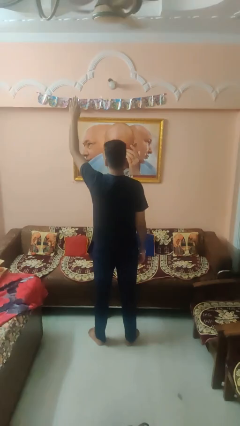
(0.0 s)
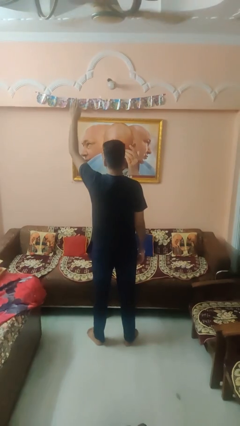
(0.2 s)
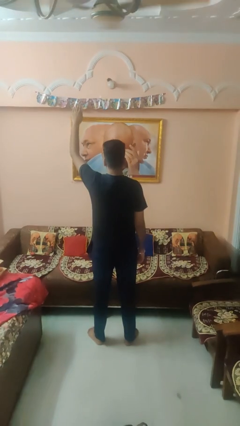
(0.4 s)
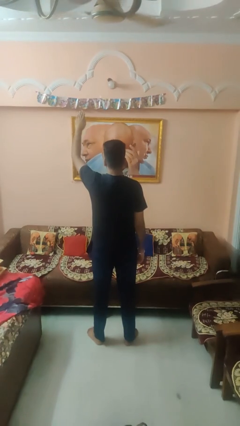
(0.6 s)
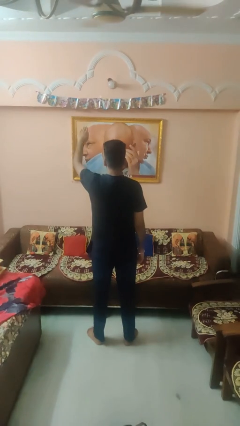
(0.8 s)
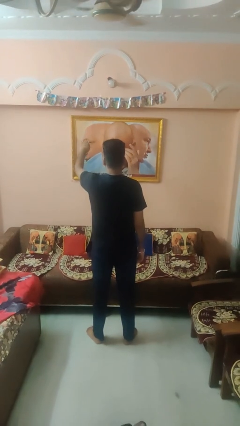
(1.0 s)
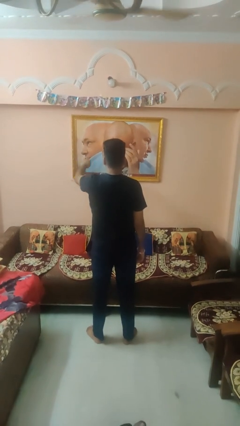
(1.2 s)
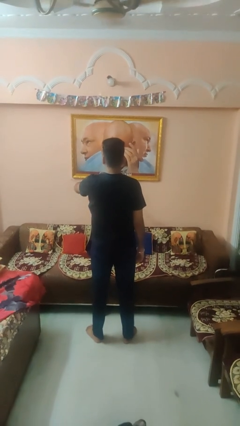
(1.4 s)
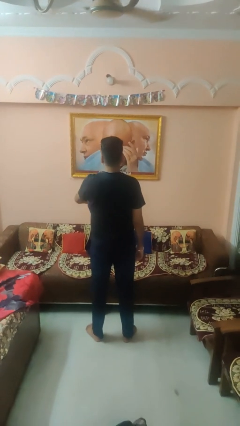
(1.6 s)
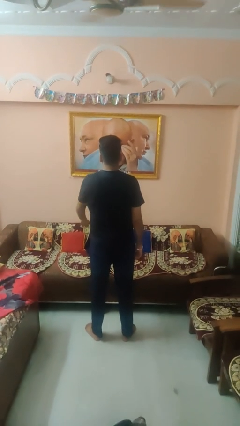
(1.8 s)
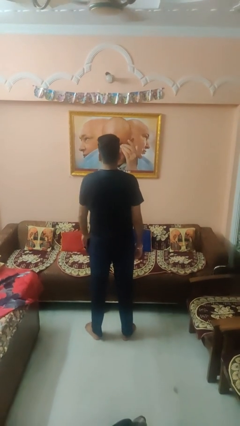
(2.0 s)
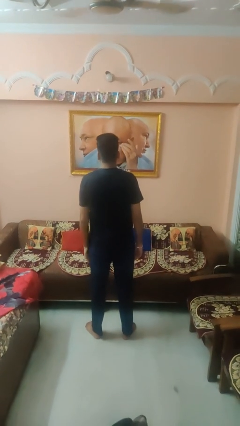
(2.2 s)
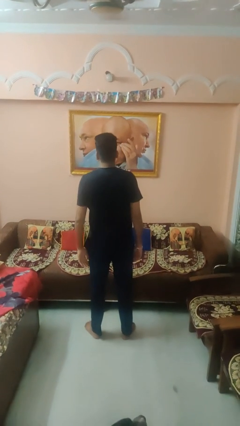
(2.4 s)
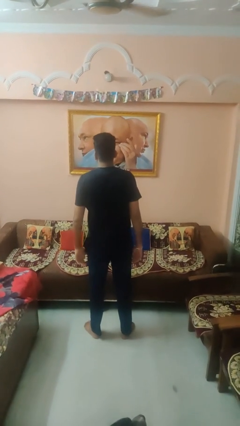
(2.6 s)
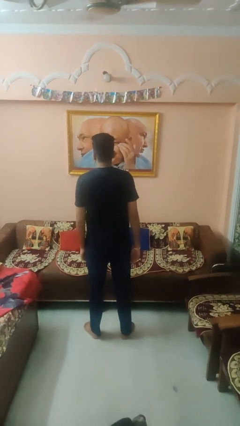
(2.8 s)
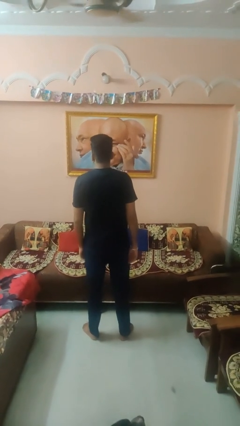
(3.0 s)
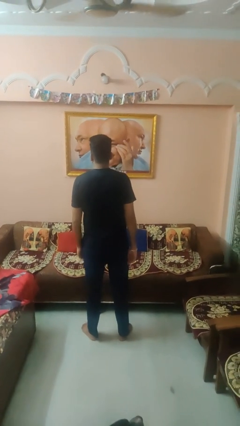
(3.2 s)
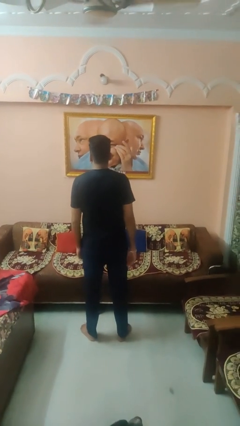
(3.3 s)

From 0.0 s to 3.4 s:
person gestures lower hand

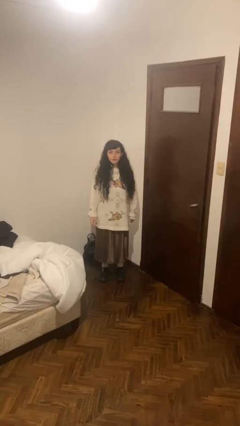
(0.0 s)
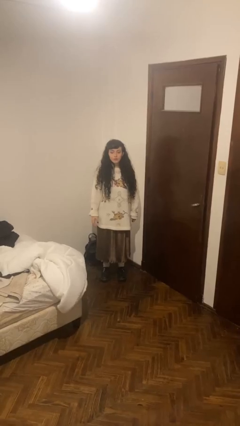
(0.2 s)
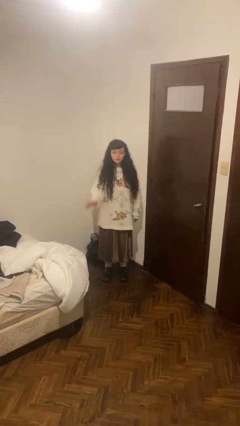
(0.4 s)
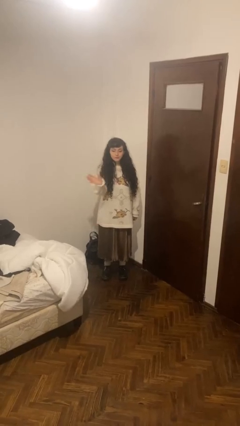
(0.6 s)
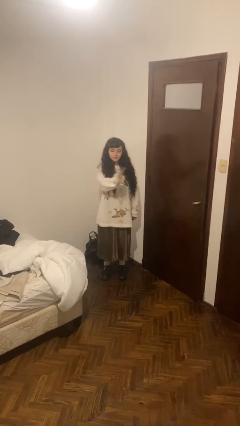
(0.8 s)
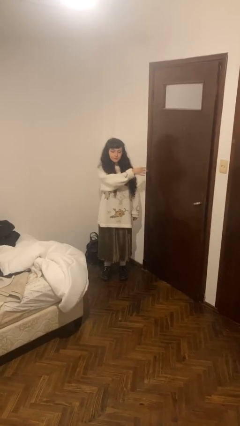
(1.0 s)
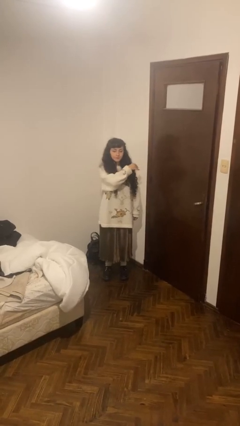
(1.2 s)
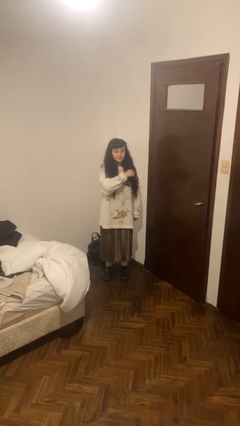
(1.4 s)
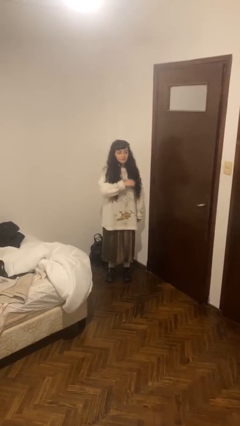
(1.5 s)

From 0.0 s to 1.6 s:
person gestures swipe left

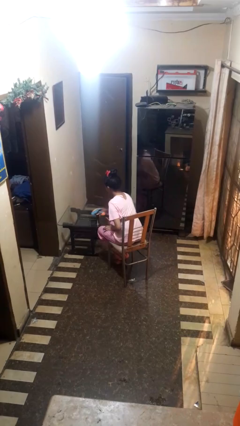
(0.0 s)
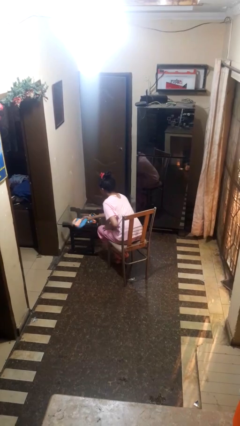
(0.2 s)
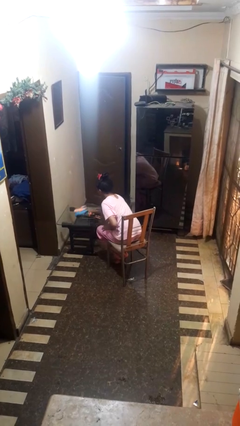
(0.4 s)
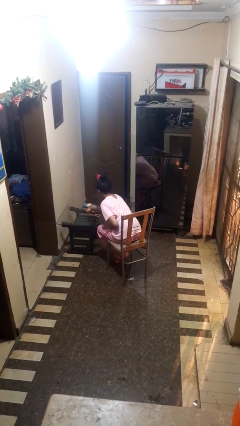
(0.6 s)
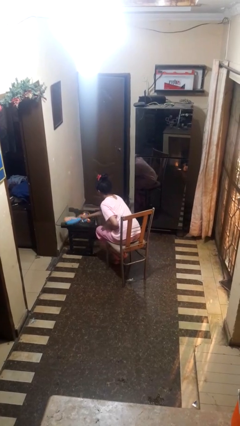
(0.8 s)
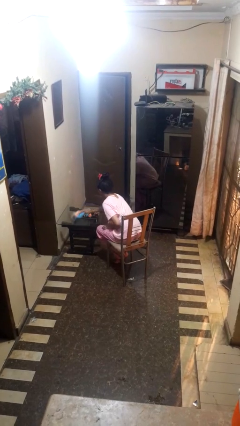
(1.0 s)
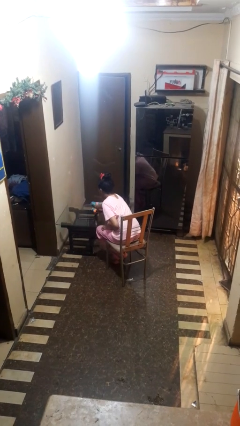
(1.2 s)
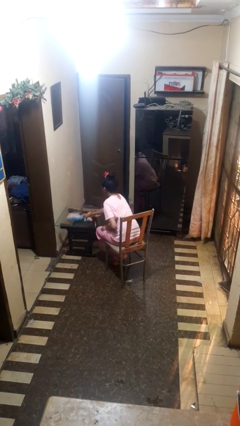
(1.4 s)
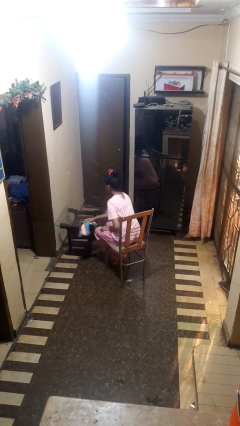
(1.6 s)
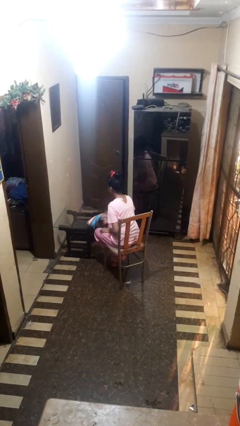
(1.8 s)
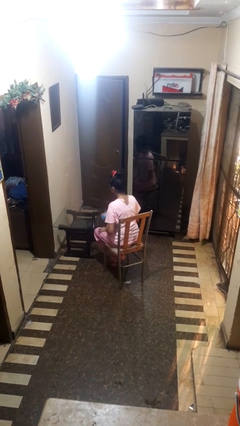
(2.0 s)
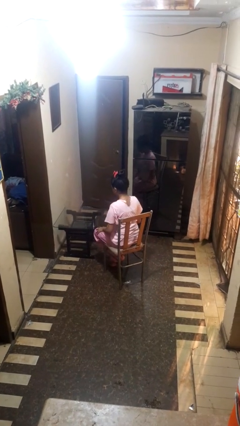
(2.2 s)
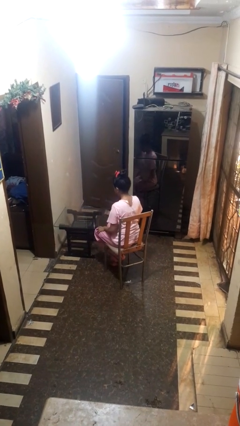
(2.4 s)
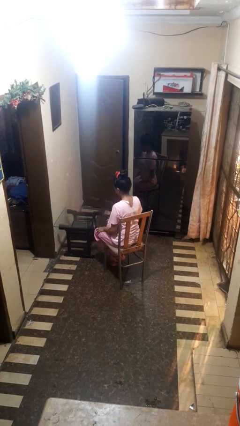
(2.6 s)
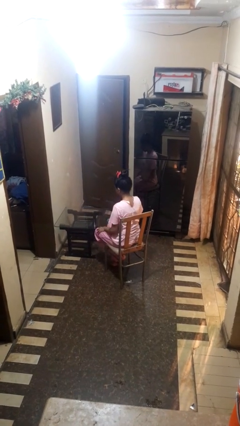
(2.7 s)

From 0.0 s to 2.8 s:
person cleans table with rag

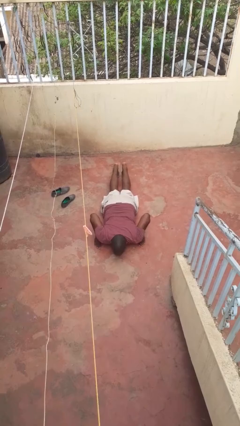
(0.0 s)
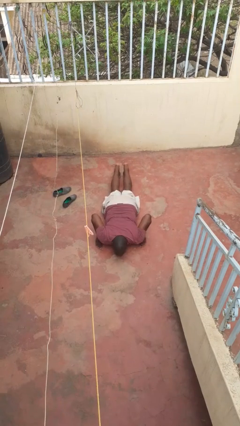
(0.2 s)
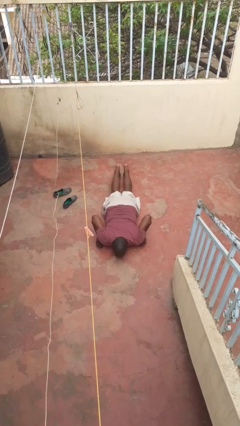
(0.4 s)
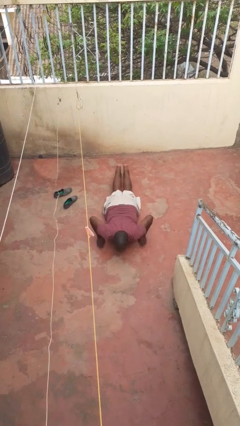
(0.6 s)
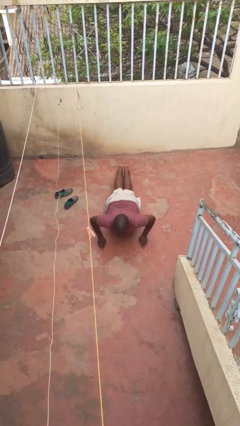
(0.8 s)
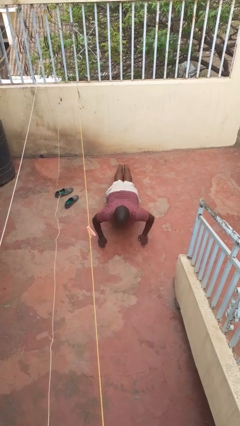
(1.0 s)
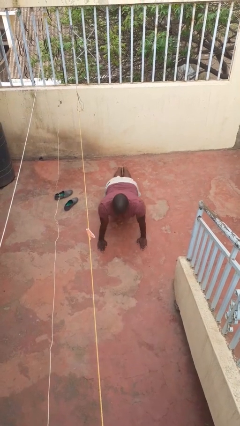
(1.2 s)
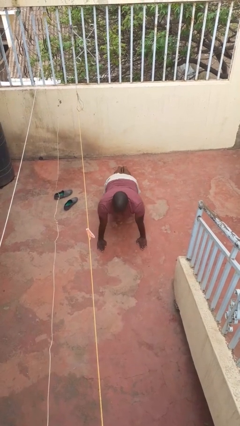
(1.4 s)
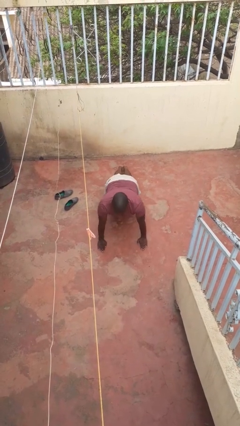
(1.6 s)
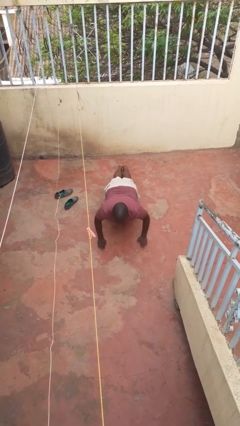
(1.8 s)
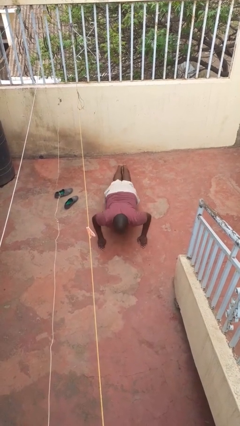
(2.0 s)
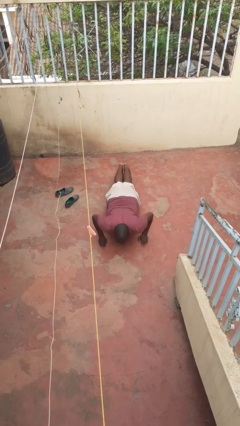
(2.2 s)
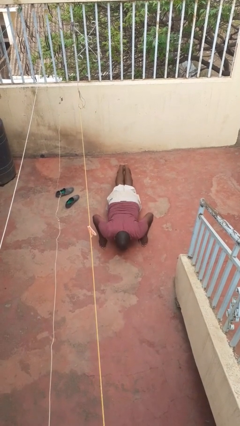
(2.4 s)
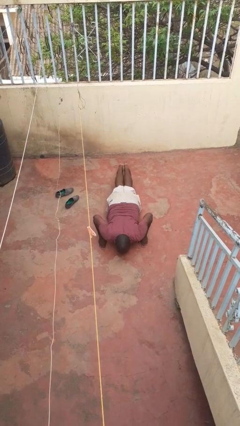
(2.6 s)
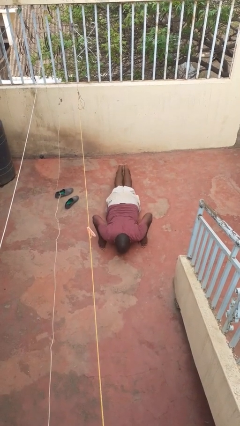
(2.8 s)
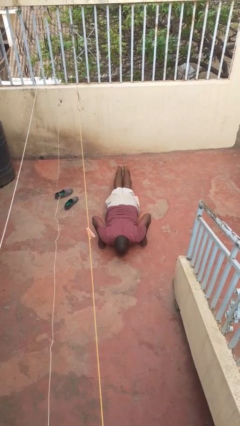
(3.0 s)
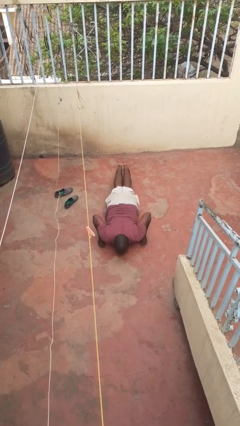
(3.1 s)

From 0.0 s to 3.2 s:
person exercises with pushup

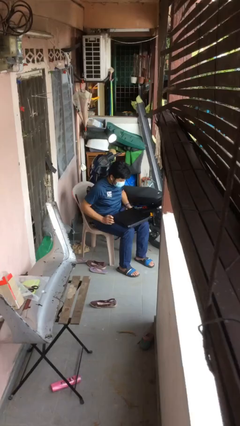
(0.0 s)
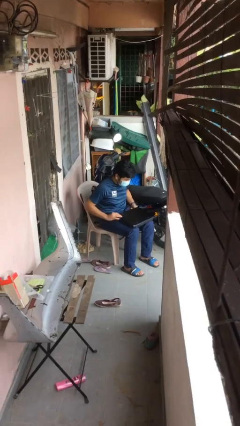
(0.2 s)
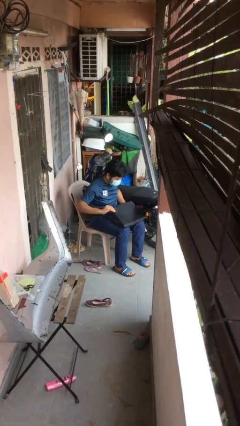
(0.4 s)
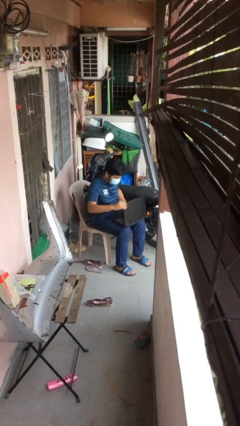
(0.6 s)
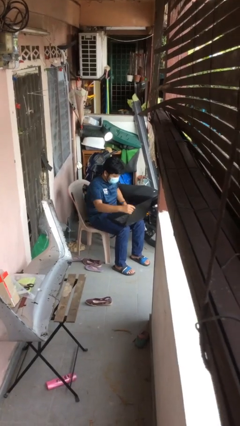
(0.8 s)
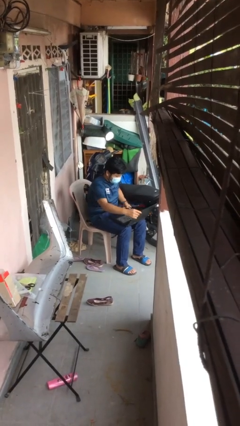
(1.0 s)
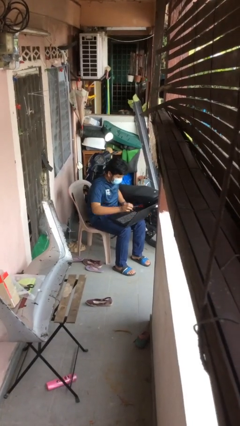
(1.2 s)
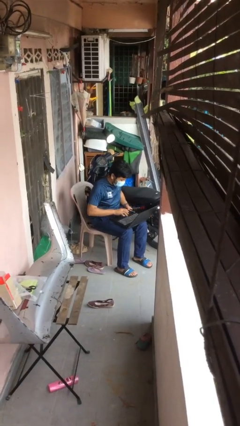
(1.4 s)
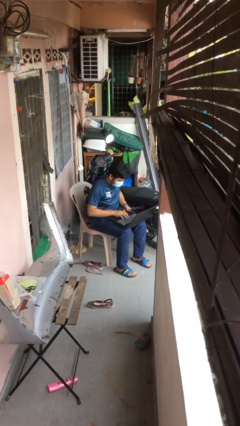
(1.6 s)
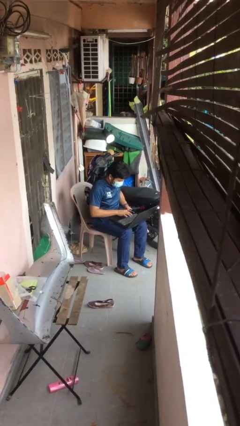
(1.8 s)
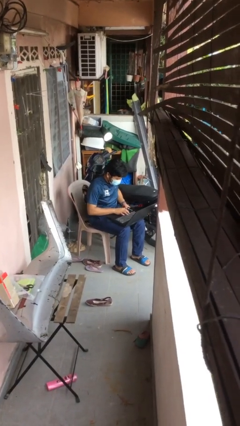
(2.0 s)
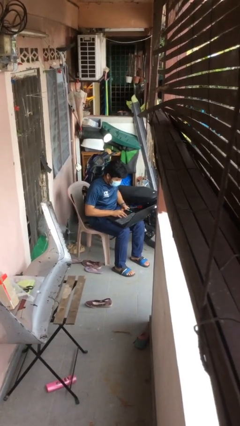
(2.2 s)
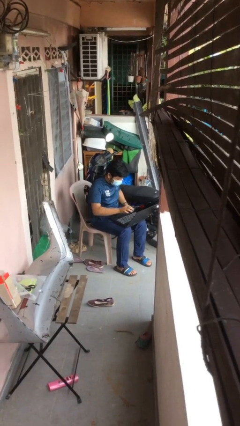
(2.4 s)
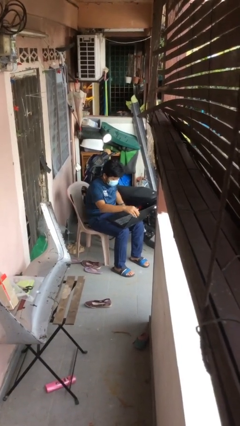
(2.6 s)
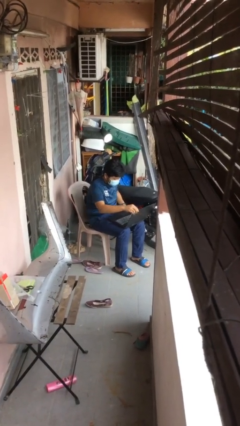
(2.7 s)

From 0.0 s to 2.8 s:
person opens laptop

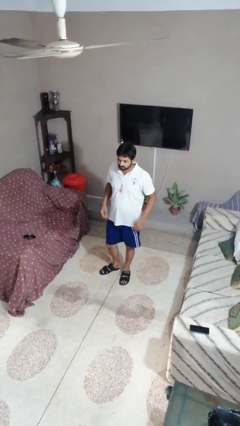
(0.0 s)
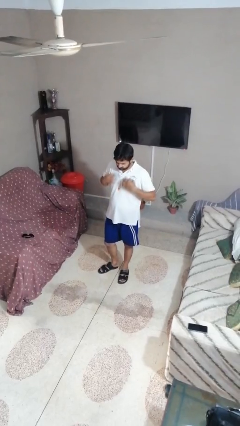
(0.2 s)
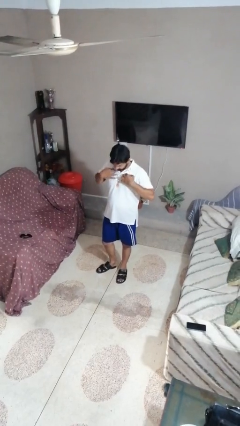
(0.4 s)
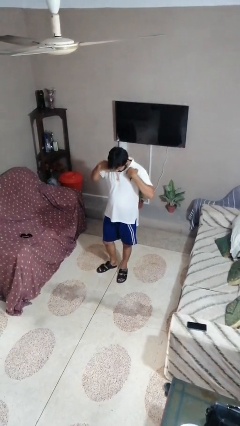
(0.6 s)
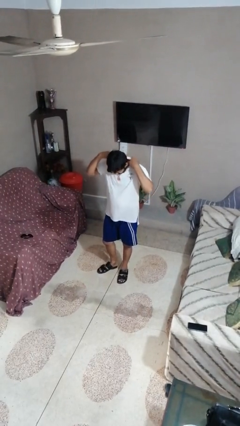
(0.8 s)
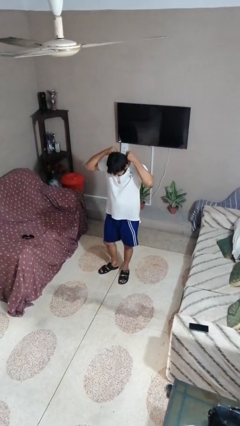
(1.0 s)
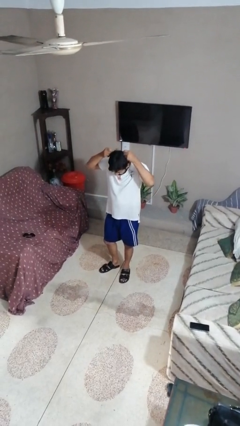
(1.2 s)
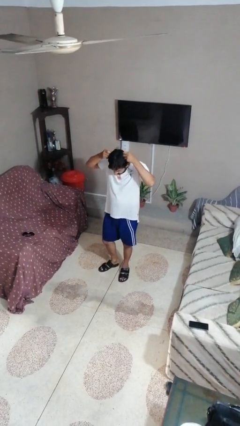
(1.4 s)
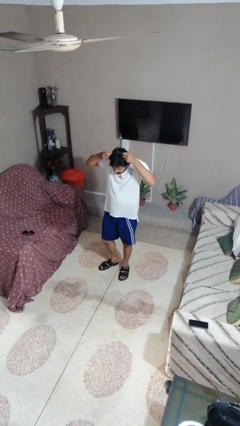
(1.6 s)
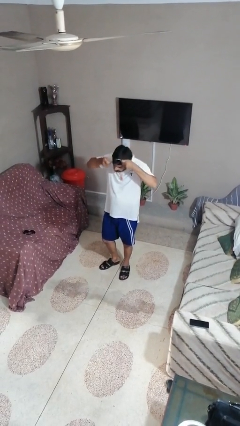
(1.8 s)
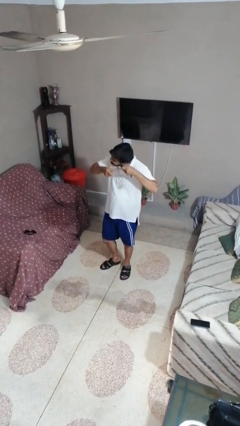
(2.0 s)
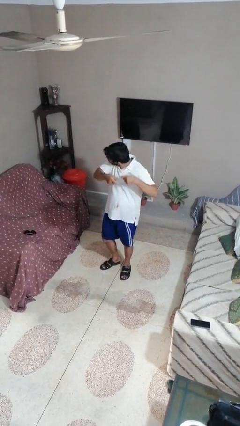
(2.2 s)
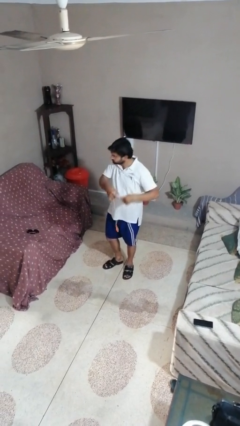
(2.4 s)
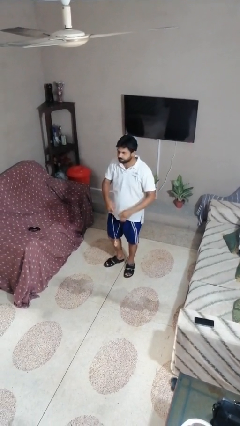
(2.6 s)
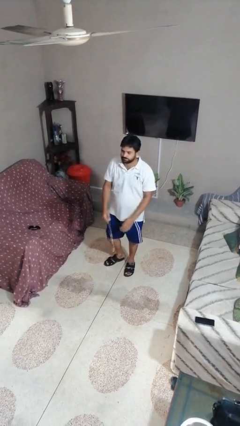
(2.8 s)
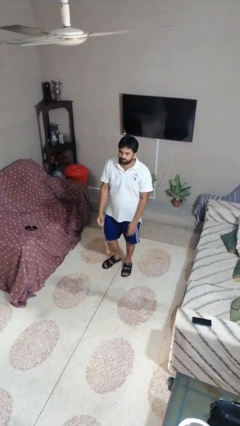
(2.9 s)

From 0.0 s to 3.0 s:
person takes off necklace

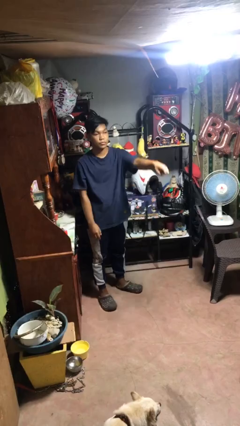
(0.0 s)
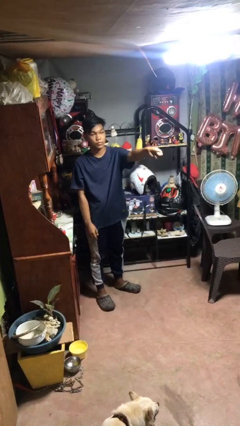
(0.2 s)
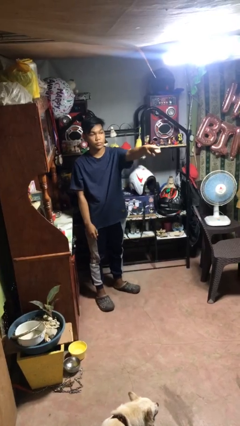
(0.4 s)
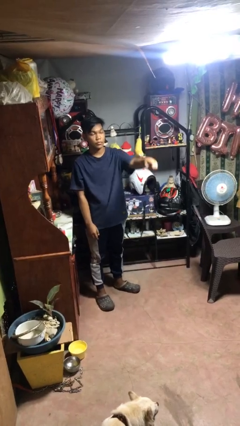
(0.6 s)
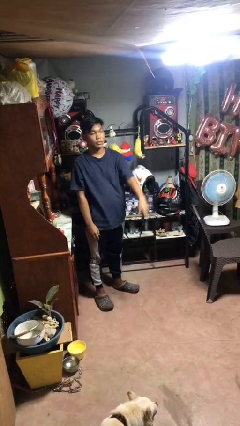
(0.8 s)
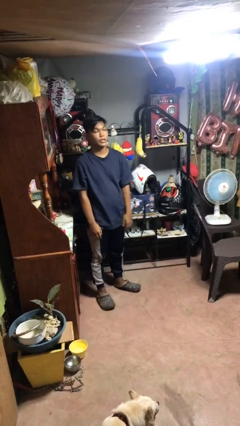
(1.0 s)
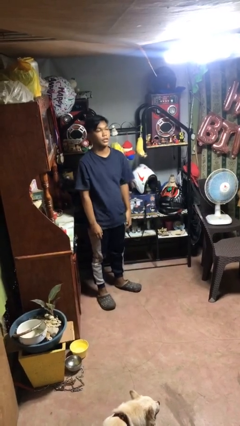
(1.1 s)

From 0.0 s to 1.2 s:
person points at person
